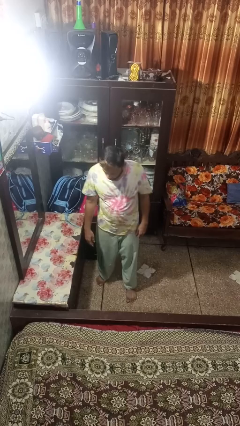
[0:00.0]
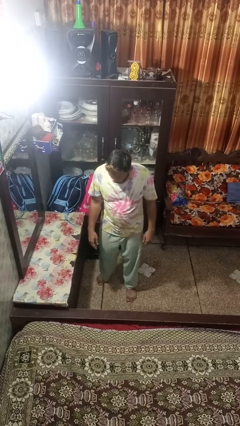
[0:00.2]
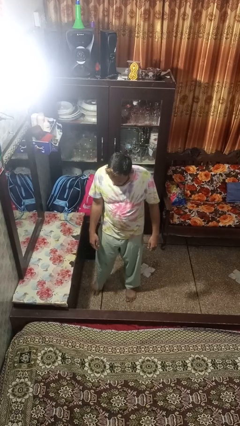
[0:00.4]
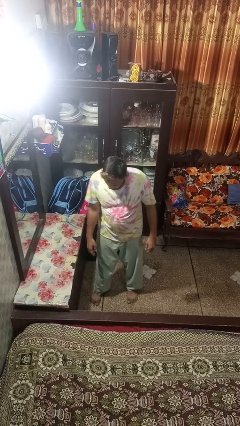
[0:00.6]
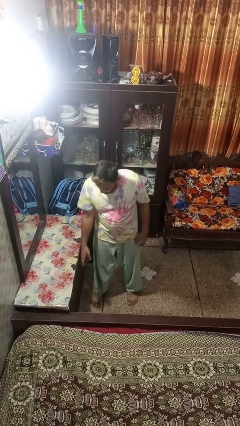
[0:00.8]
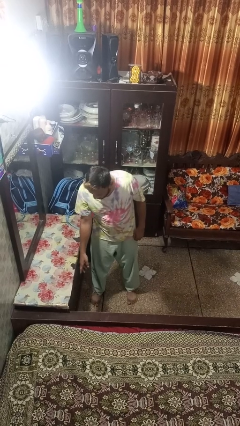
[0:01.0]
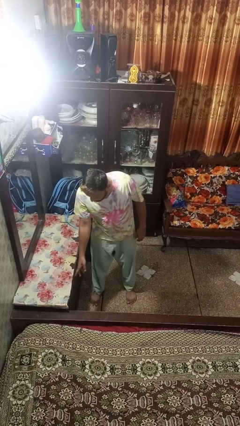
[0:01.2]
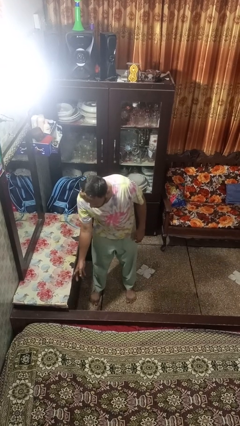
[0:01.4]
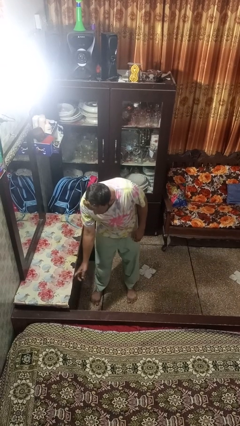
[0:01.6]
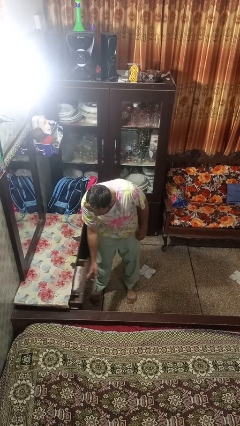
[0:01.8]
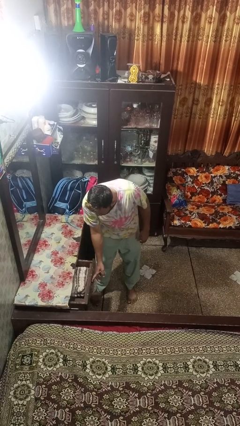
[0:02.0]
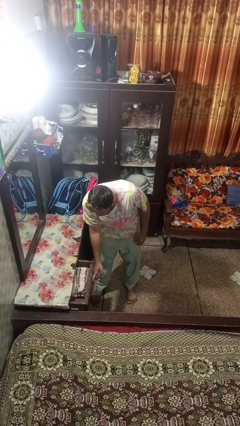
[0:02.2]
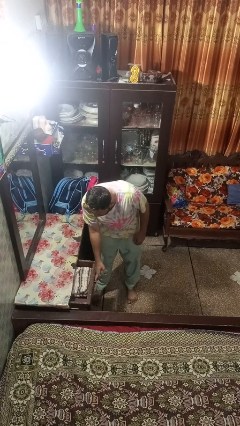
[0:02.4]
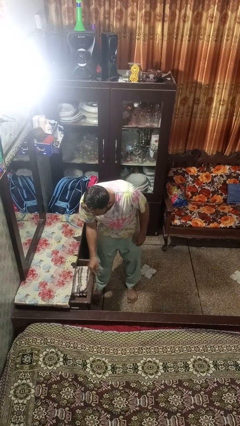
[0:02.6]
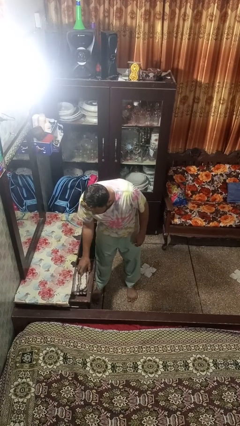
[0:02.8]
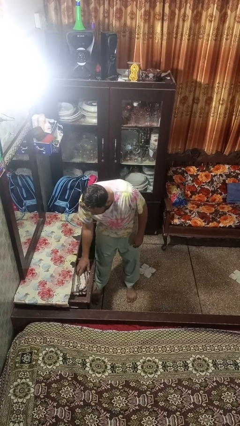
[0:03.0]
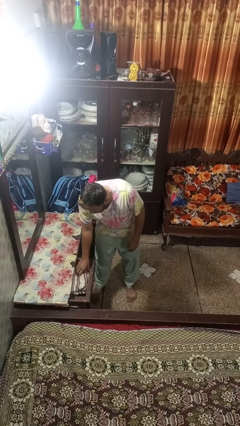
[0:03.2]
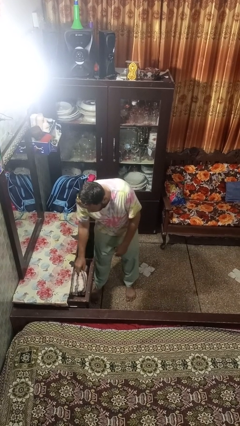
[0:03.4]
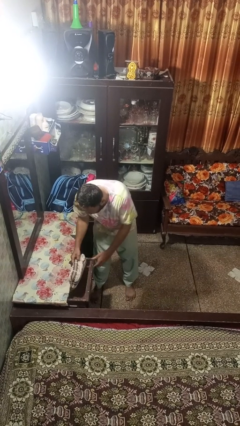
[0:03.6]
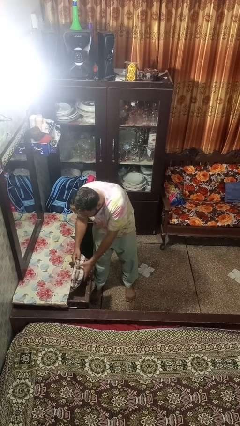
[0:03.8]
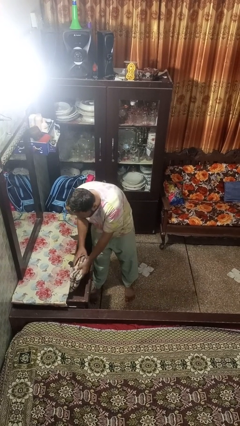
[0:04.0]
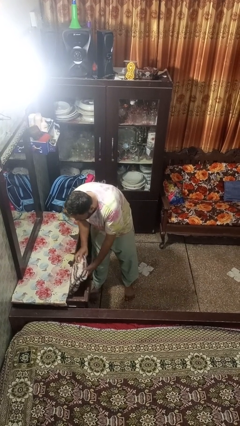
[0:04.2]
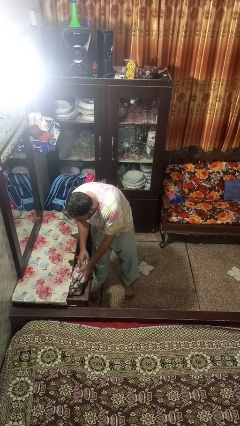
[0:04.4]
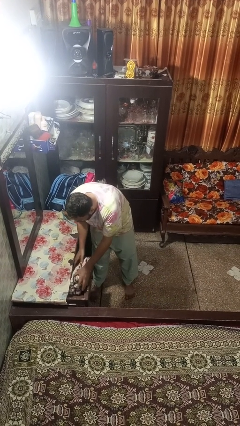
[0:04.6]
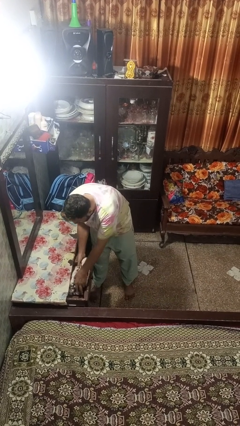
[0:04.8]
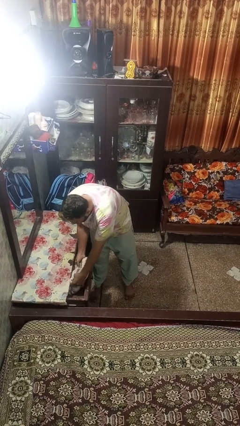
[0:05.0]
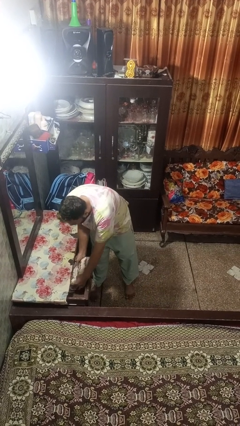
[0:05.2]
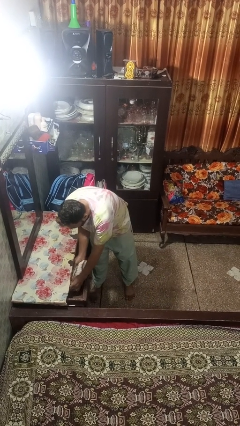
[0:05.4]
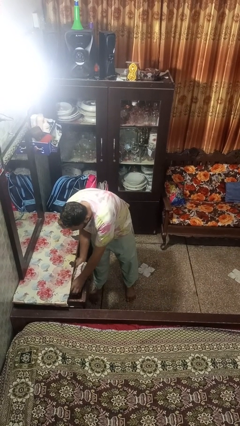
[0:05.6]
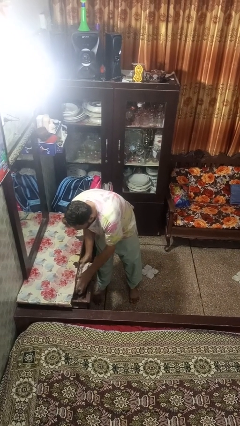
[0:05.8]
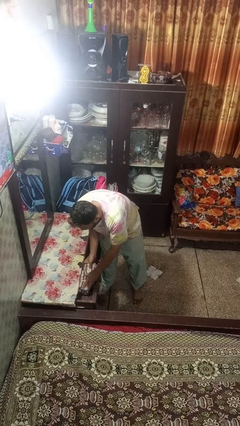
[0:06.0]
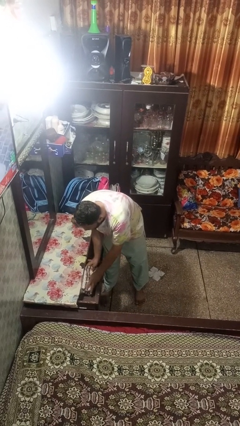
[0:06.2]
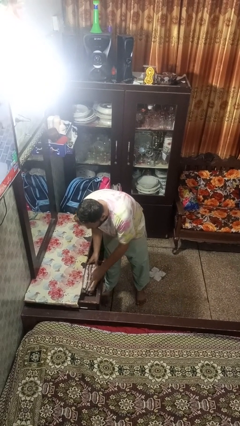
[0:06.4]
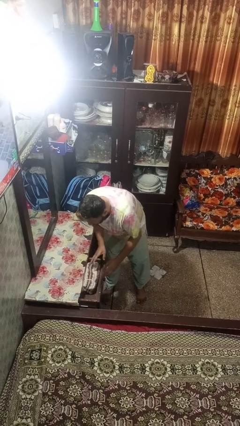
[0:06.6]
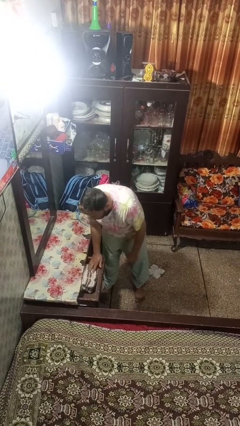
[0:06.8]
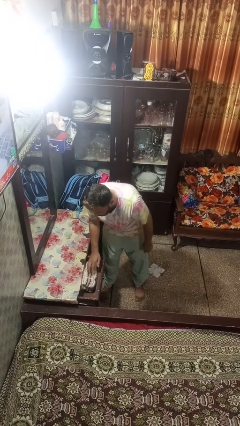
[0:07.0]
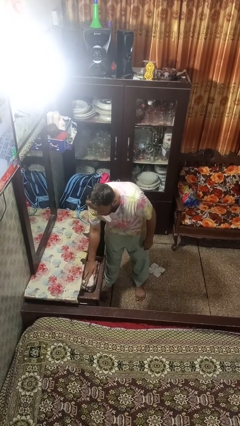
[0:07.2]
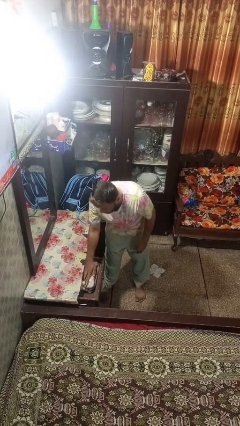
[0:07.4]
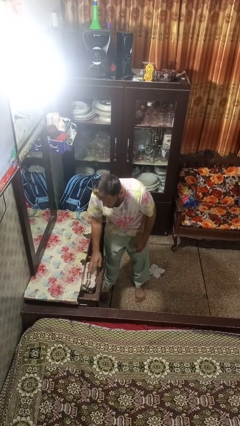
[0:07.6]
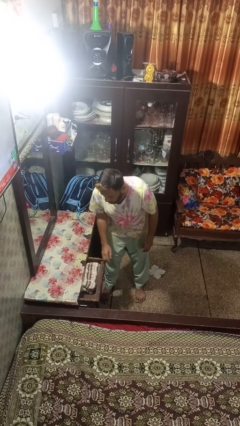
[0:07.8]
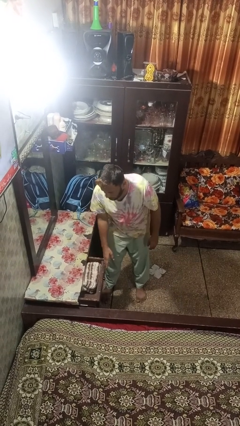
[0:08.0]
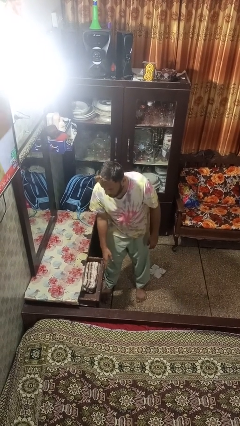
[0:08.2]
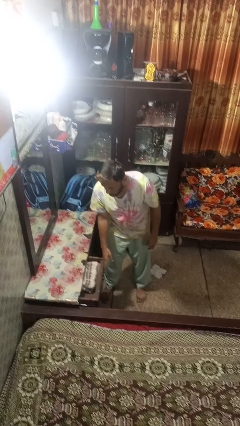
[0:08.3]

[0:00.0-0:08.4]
person opens dresser drawer

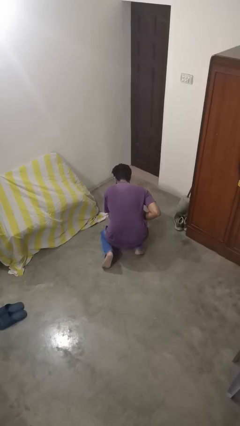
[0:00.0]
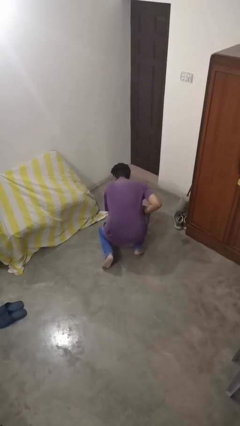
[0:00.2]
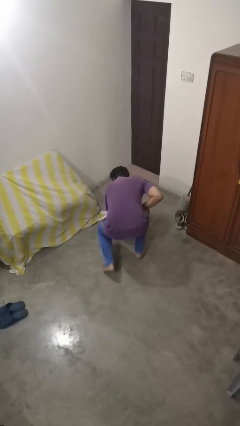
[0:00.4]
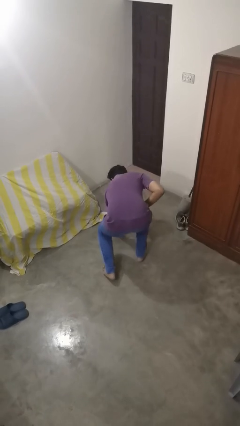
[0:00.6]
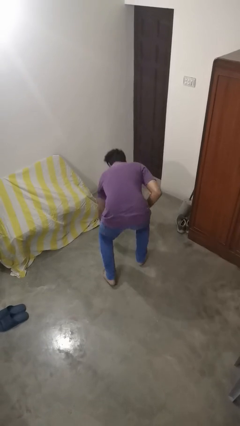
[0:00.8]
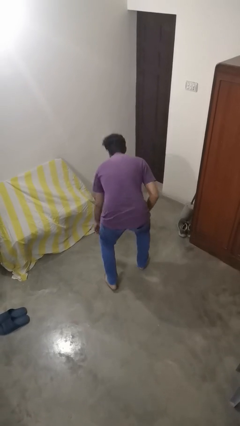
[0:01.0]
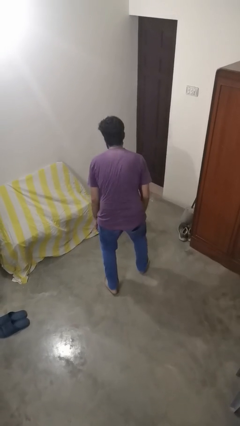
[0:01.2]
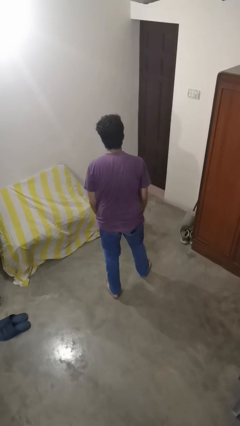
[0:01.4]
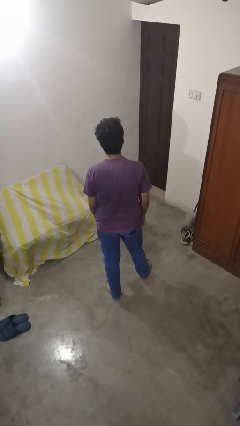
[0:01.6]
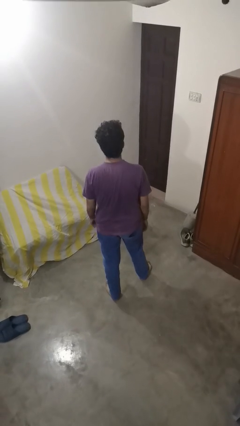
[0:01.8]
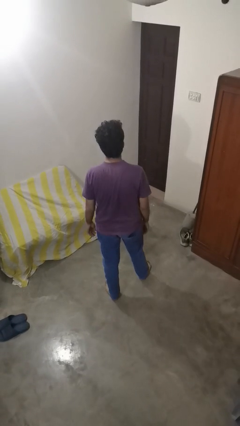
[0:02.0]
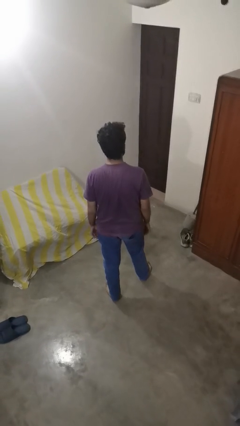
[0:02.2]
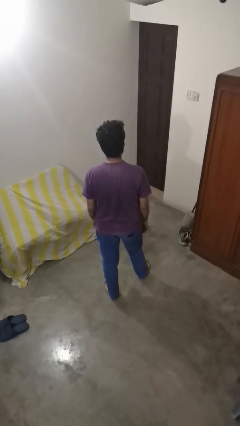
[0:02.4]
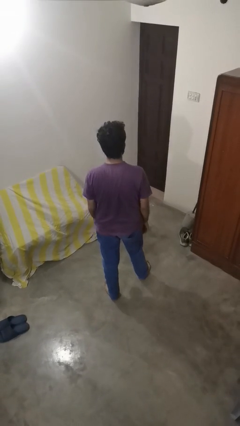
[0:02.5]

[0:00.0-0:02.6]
person stands up from floor

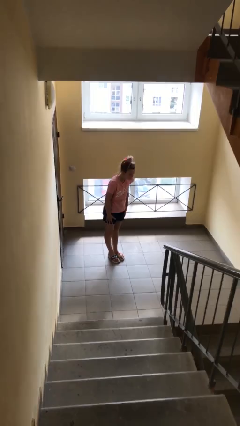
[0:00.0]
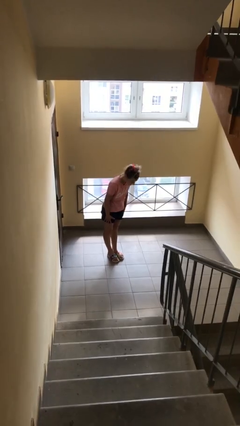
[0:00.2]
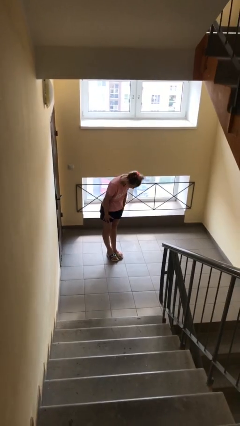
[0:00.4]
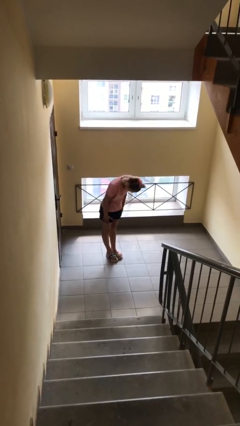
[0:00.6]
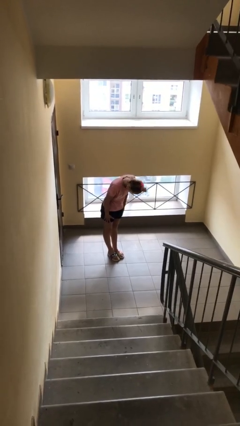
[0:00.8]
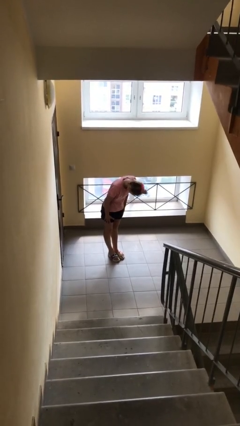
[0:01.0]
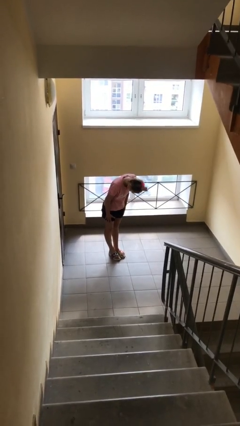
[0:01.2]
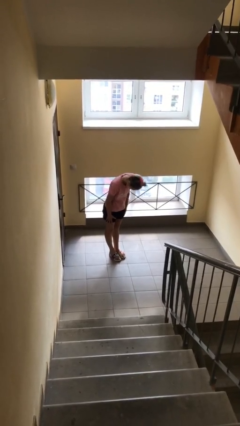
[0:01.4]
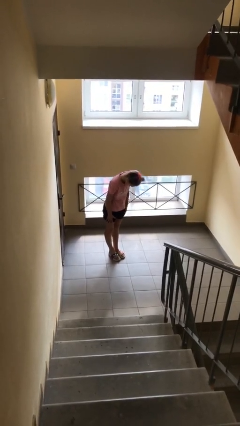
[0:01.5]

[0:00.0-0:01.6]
person bows

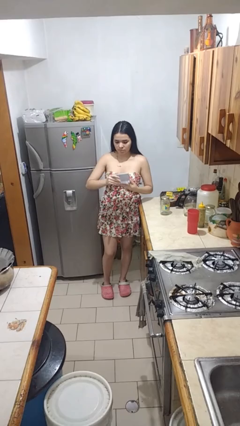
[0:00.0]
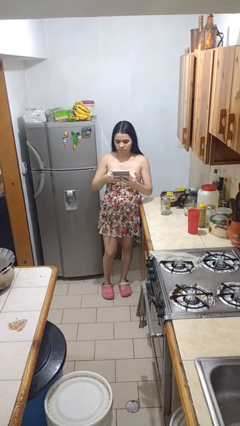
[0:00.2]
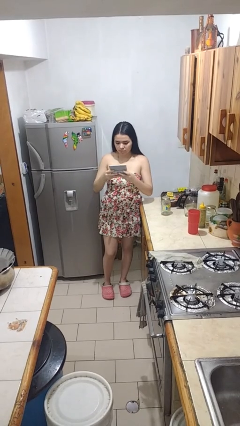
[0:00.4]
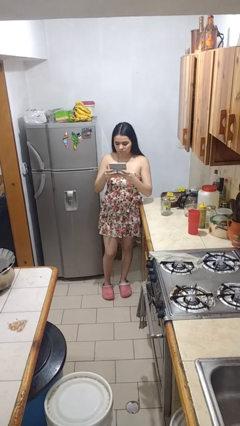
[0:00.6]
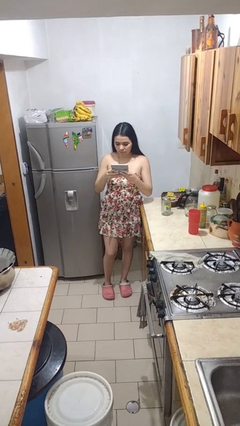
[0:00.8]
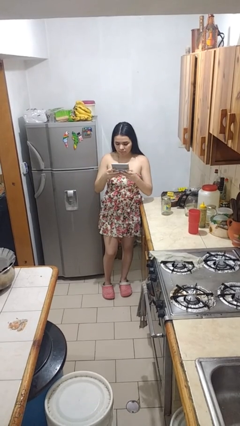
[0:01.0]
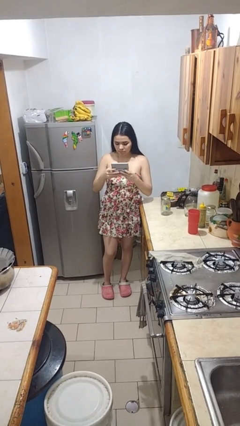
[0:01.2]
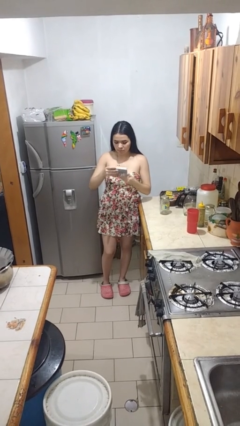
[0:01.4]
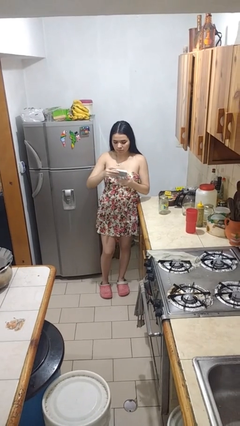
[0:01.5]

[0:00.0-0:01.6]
person interacts with handheld game

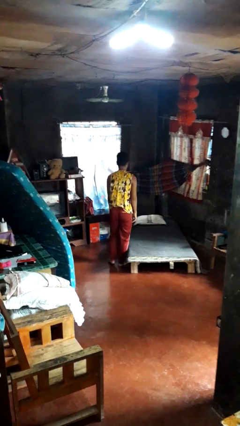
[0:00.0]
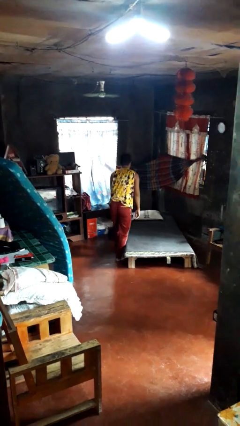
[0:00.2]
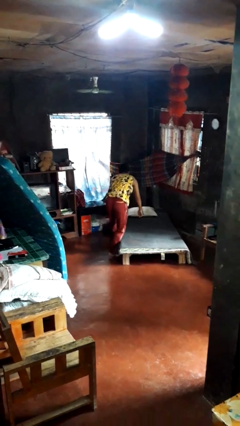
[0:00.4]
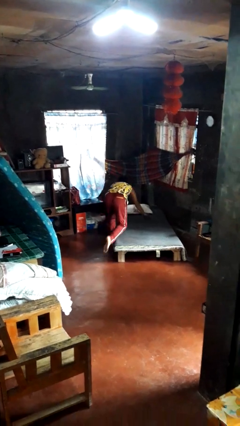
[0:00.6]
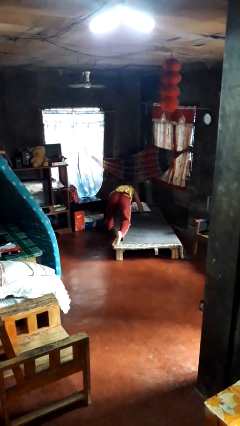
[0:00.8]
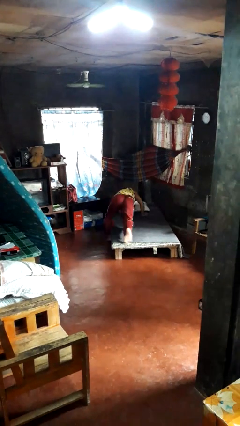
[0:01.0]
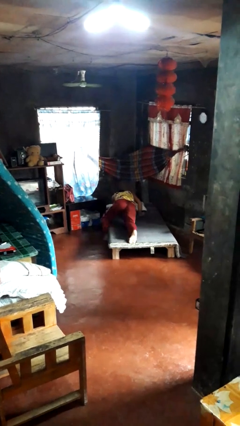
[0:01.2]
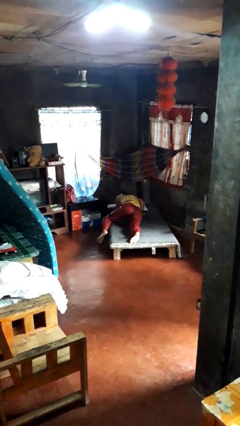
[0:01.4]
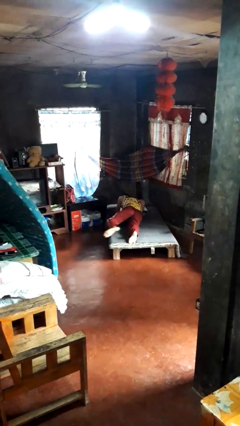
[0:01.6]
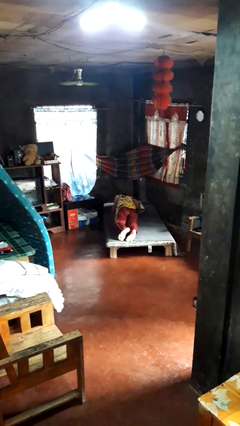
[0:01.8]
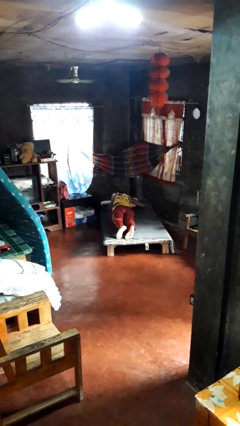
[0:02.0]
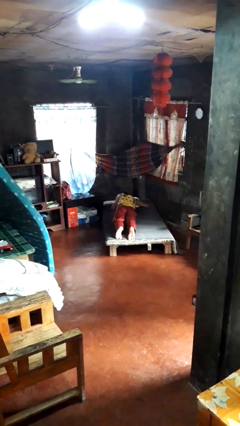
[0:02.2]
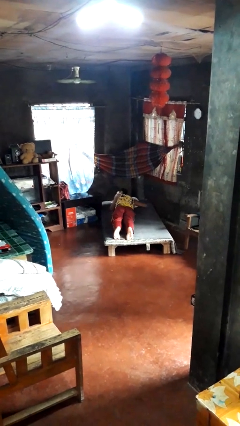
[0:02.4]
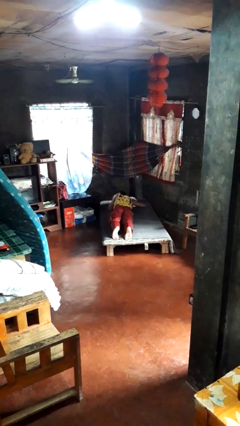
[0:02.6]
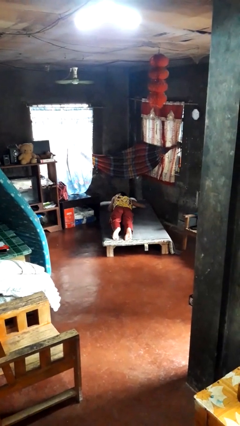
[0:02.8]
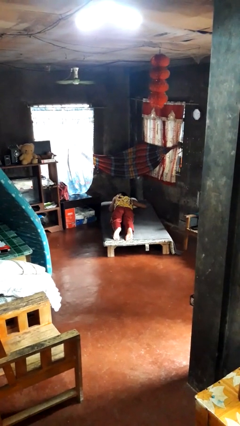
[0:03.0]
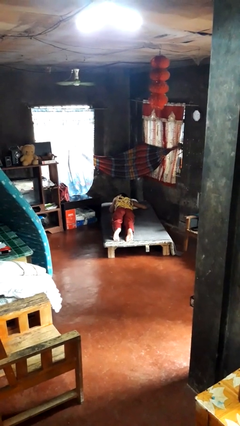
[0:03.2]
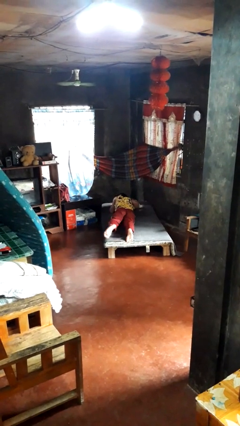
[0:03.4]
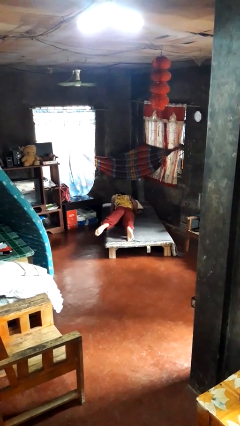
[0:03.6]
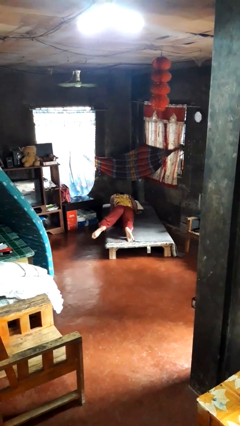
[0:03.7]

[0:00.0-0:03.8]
person lies down on bed
